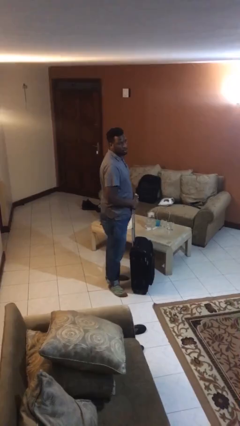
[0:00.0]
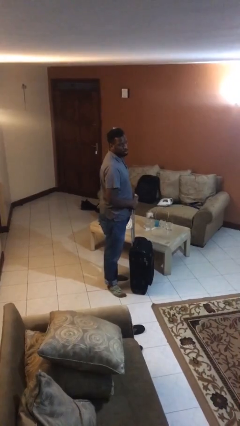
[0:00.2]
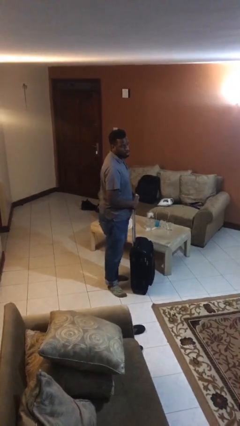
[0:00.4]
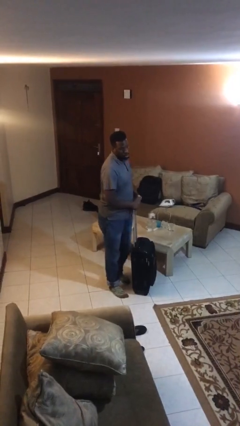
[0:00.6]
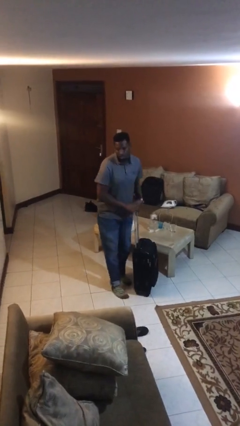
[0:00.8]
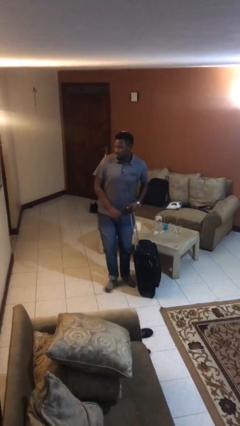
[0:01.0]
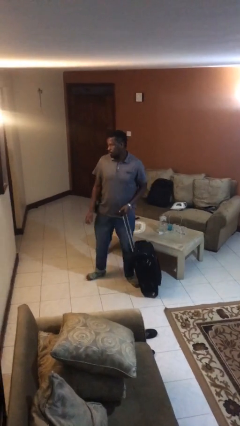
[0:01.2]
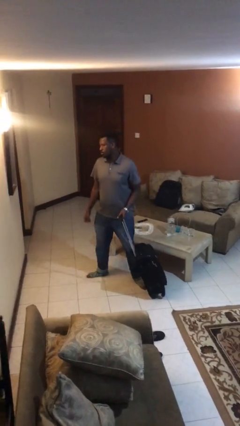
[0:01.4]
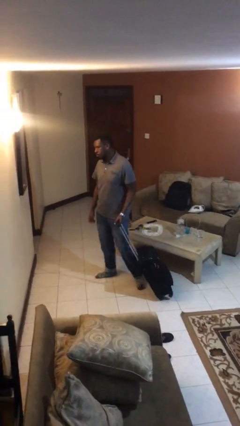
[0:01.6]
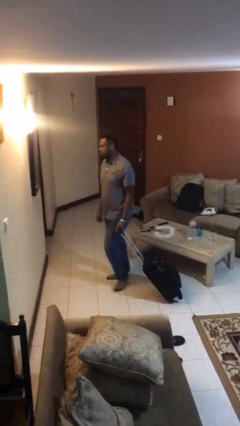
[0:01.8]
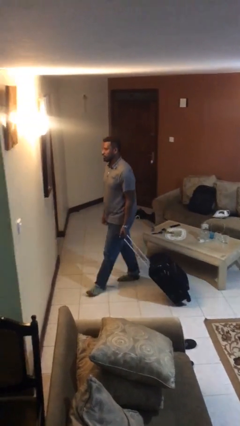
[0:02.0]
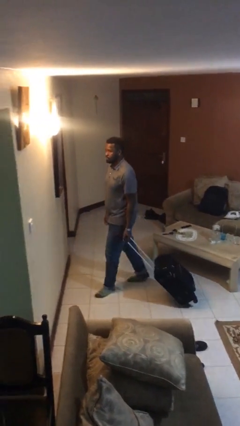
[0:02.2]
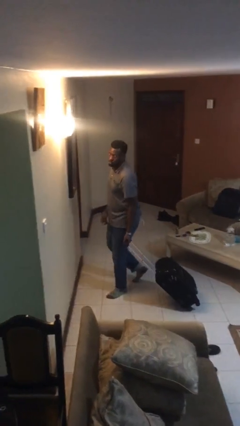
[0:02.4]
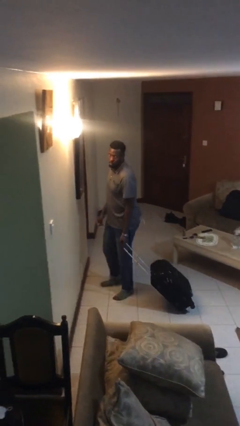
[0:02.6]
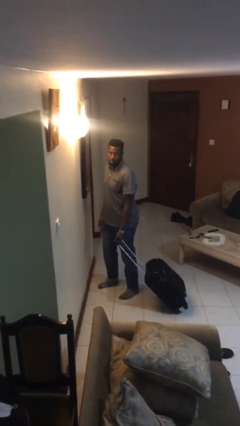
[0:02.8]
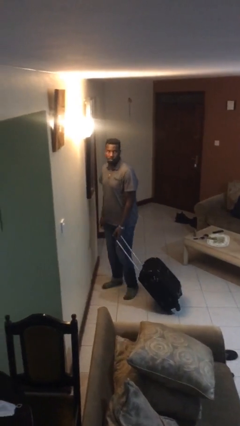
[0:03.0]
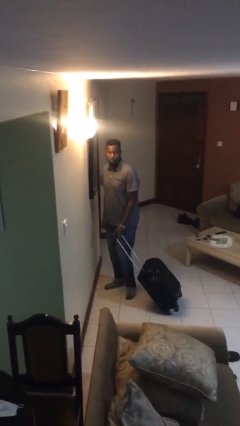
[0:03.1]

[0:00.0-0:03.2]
person pulls wheeled cart

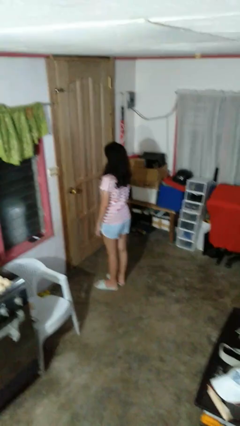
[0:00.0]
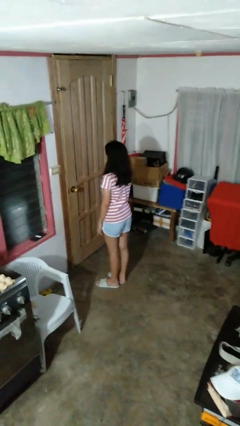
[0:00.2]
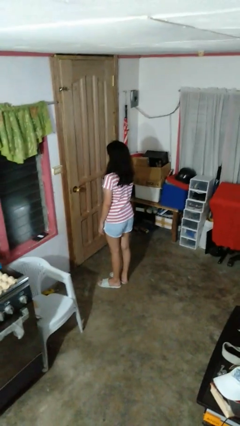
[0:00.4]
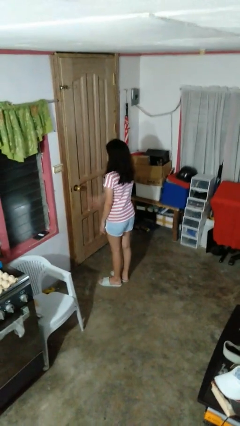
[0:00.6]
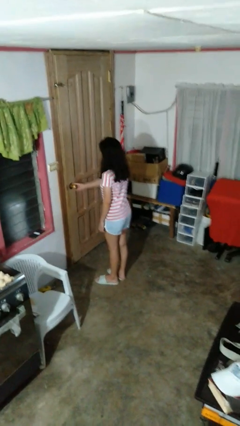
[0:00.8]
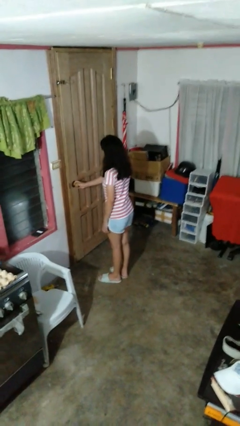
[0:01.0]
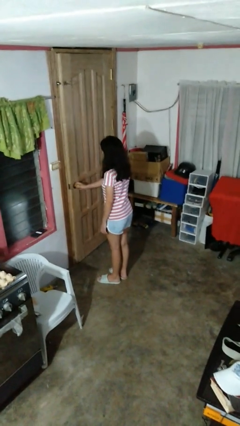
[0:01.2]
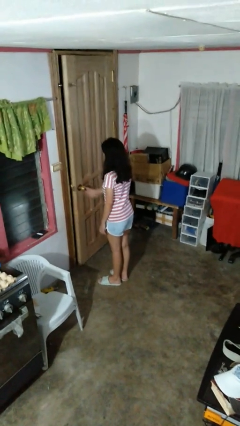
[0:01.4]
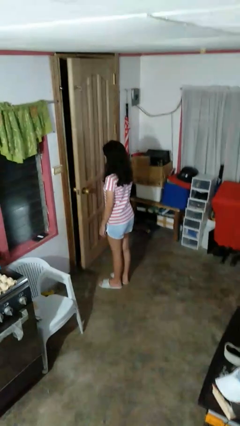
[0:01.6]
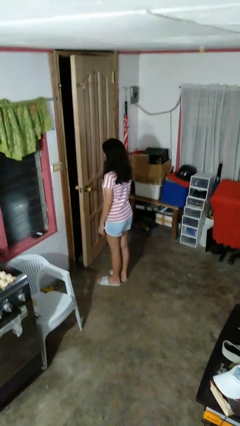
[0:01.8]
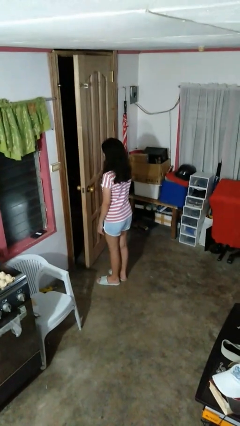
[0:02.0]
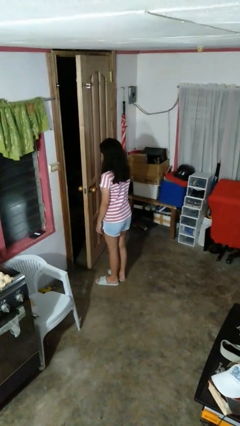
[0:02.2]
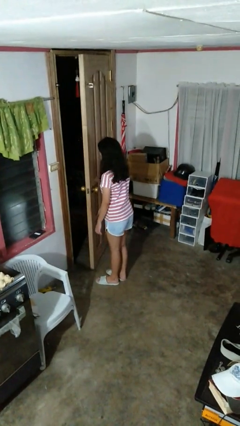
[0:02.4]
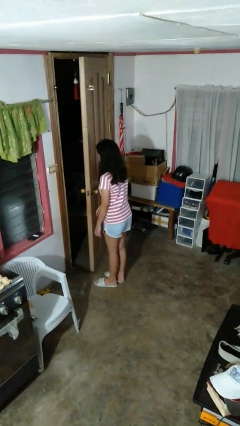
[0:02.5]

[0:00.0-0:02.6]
person opens facility door

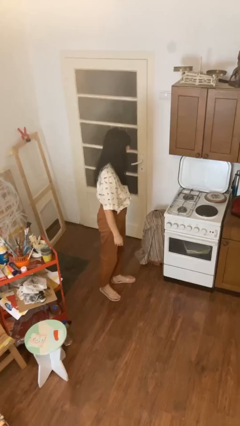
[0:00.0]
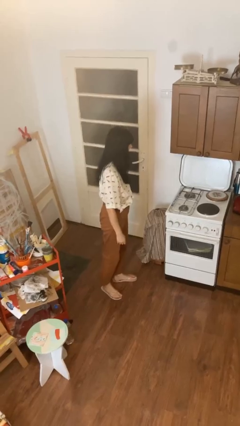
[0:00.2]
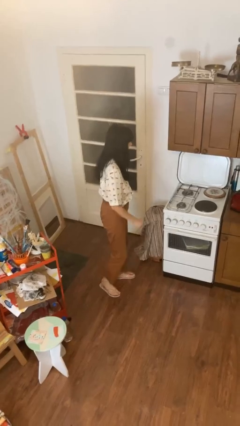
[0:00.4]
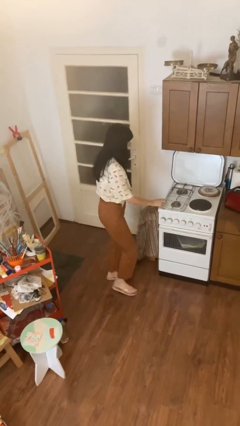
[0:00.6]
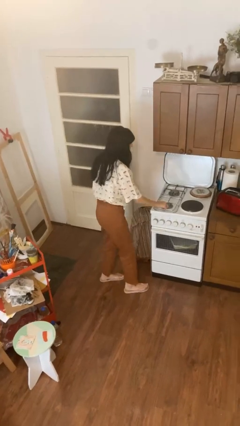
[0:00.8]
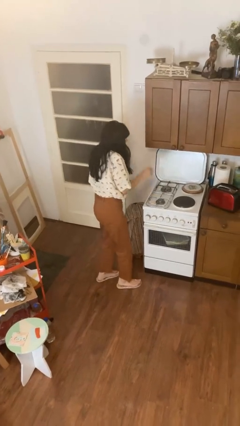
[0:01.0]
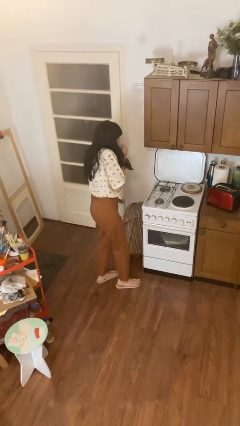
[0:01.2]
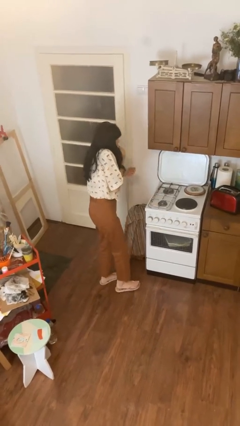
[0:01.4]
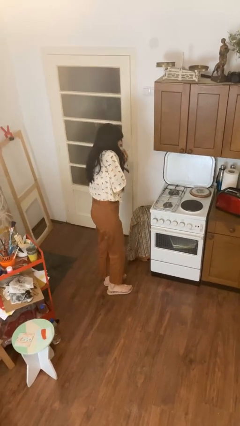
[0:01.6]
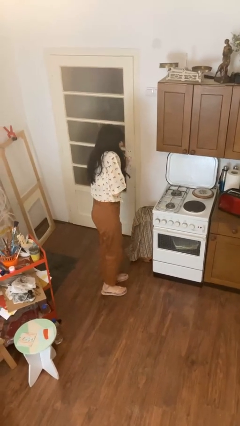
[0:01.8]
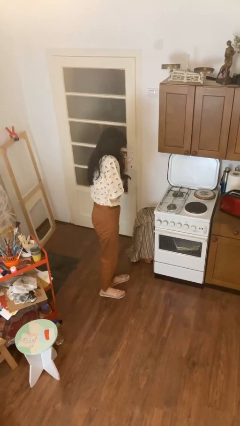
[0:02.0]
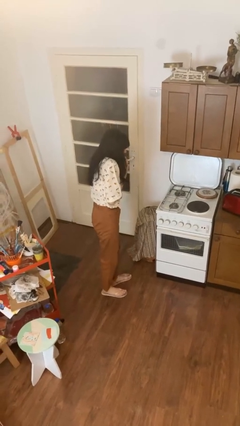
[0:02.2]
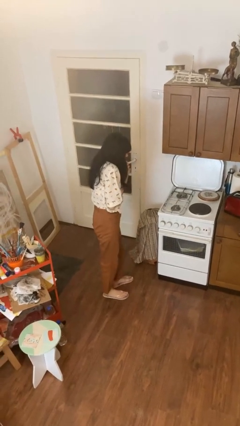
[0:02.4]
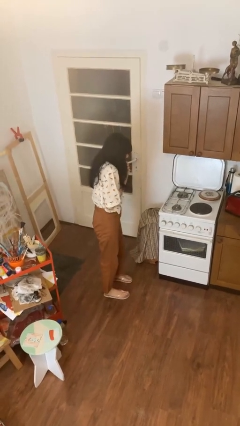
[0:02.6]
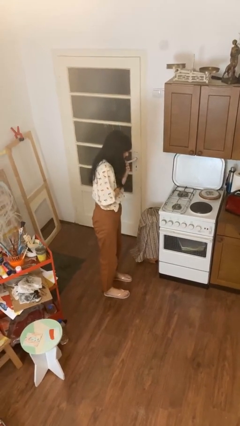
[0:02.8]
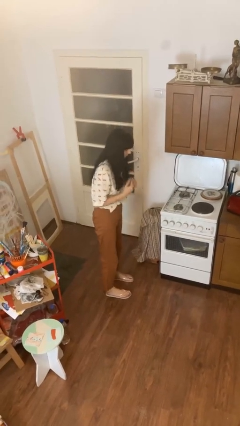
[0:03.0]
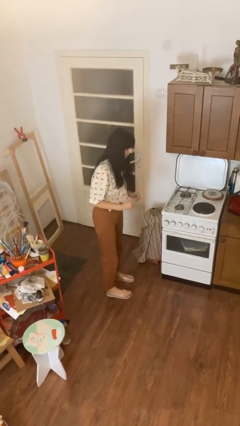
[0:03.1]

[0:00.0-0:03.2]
person burns hand

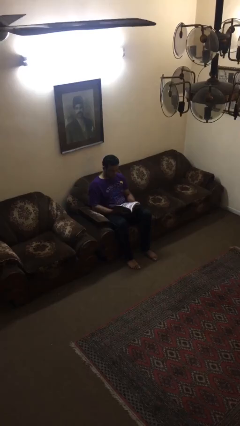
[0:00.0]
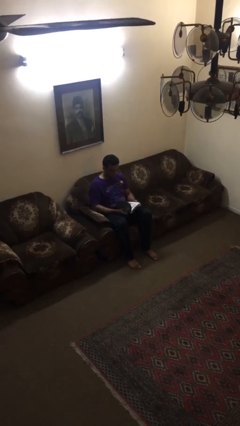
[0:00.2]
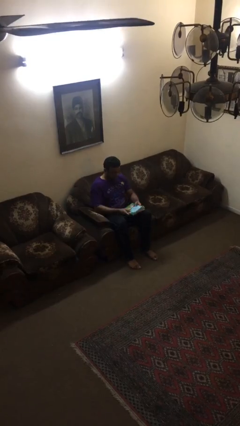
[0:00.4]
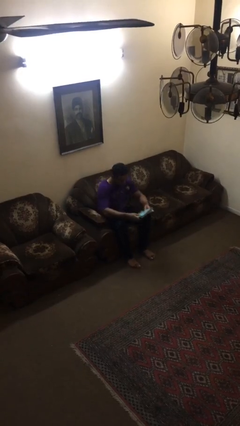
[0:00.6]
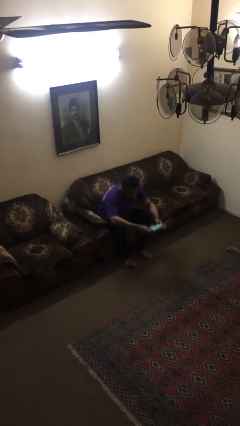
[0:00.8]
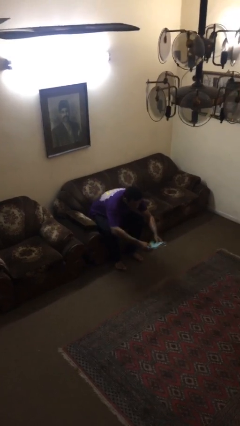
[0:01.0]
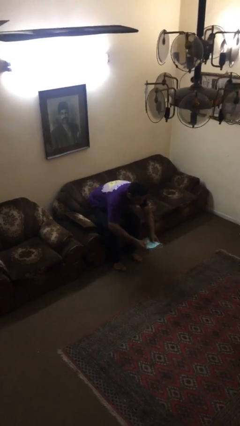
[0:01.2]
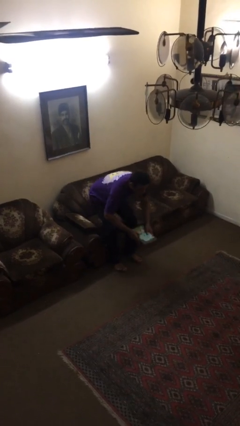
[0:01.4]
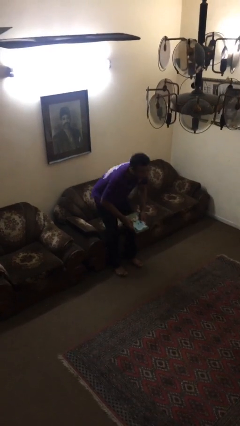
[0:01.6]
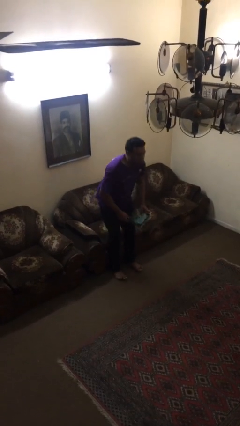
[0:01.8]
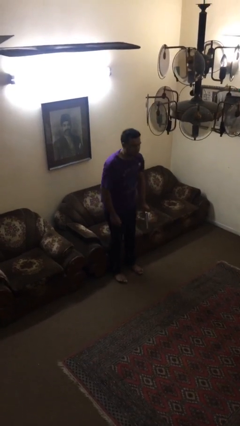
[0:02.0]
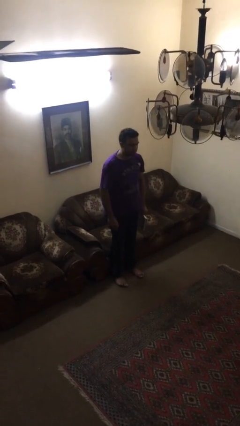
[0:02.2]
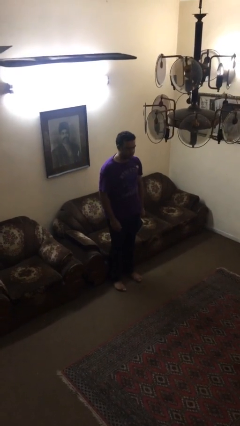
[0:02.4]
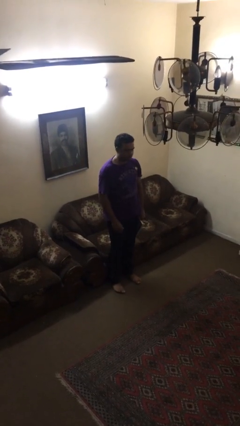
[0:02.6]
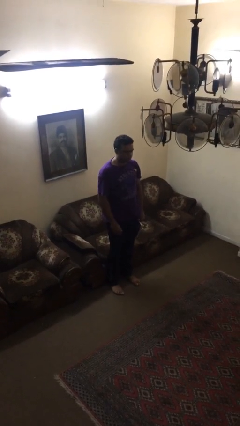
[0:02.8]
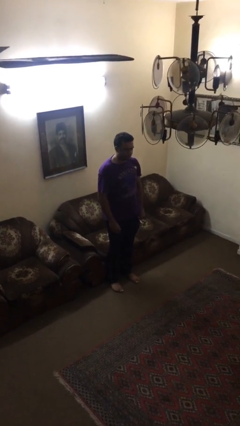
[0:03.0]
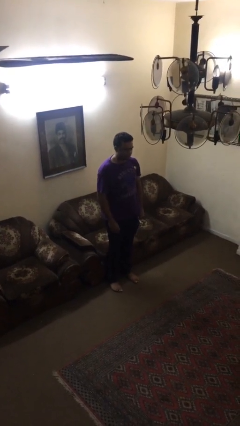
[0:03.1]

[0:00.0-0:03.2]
person stands up

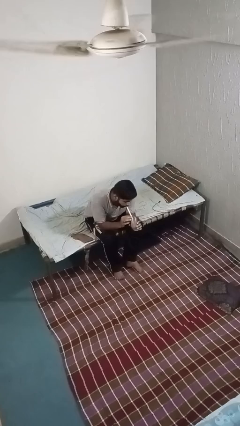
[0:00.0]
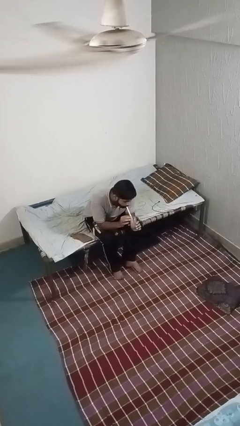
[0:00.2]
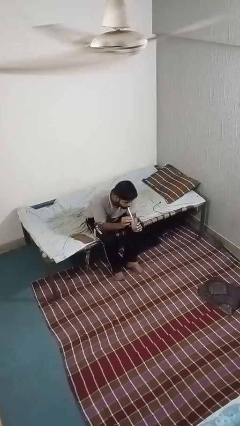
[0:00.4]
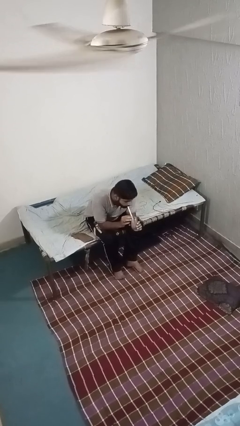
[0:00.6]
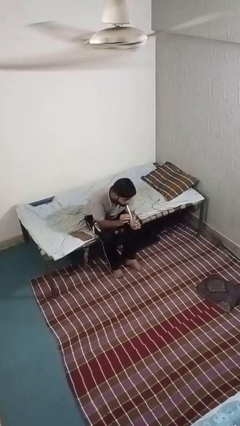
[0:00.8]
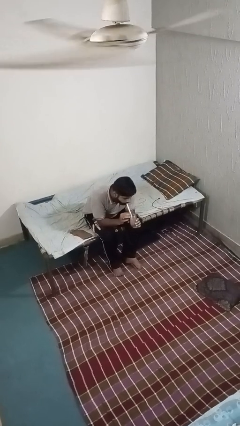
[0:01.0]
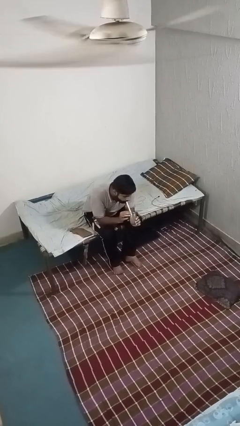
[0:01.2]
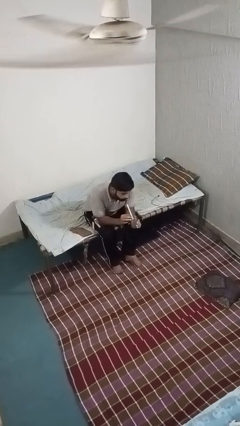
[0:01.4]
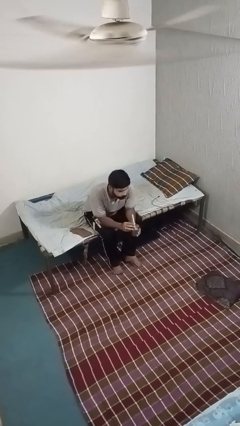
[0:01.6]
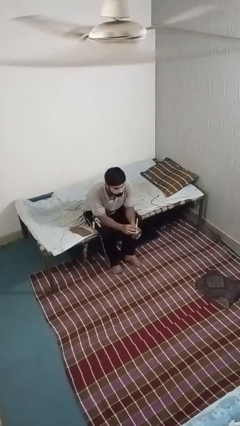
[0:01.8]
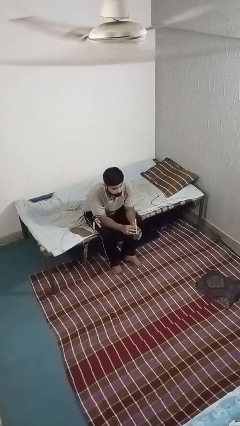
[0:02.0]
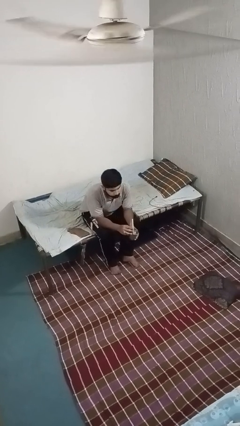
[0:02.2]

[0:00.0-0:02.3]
person drinks from straw

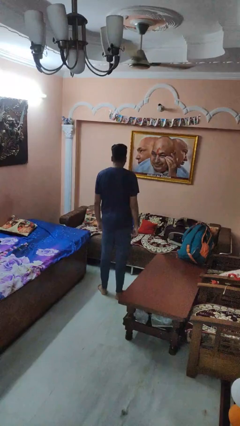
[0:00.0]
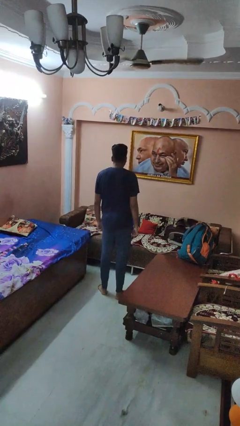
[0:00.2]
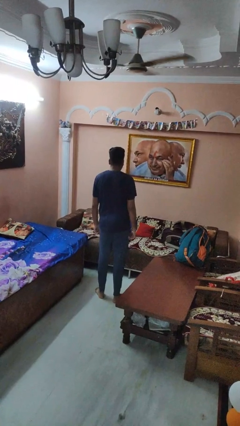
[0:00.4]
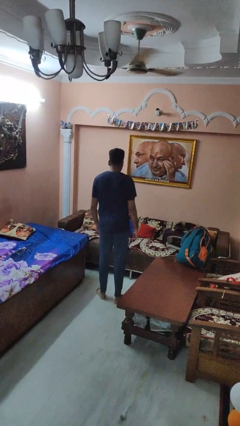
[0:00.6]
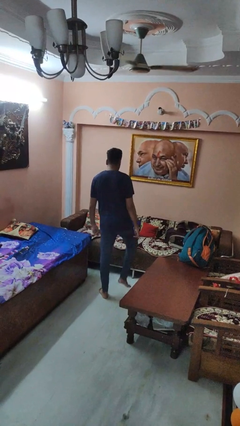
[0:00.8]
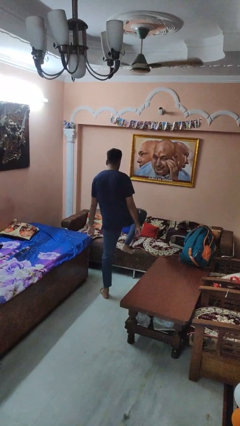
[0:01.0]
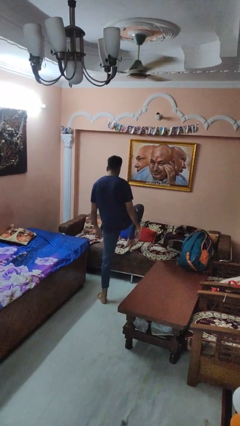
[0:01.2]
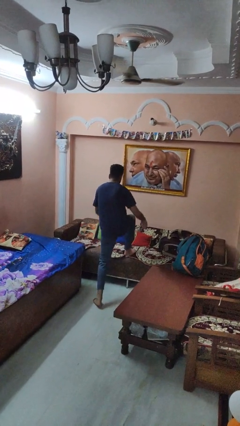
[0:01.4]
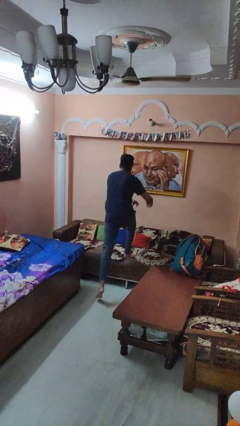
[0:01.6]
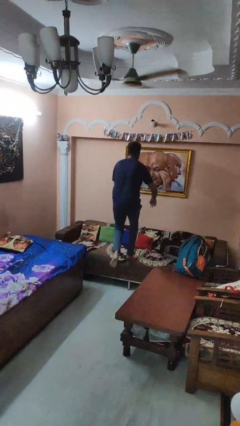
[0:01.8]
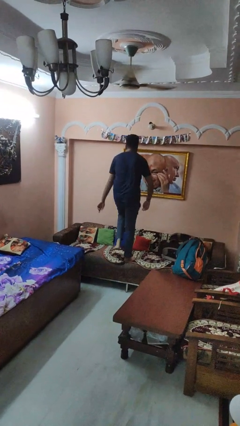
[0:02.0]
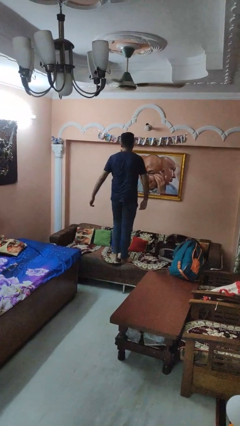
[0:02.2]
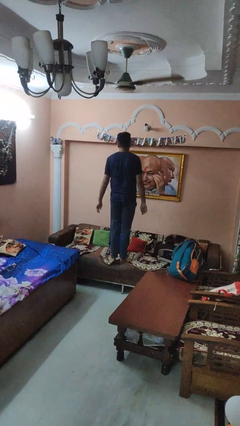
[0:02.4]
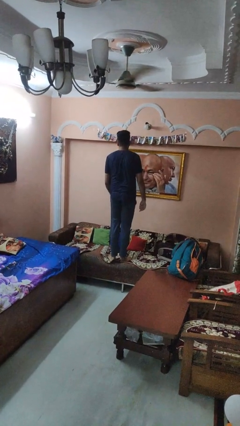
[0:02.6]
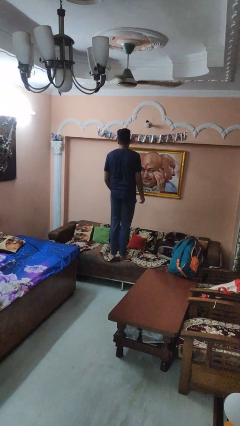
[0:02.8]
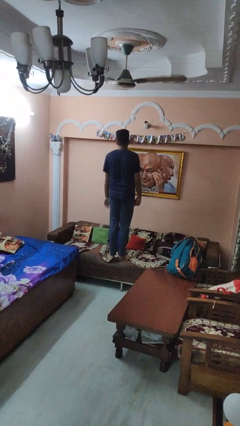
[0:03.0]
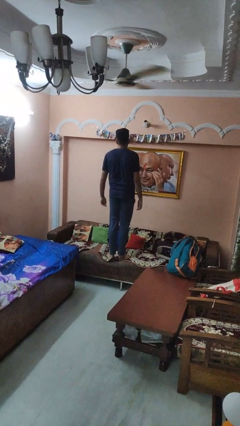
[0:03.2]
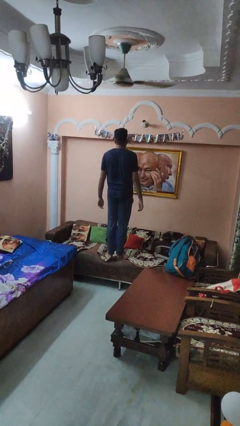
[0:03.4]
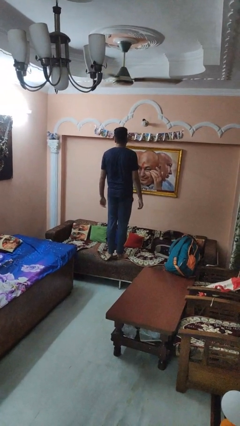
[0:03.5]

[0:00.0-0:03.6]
person climbs on couch
